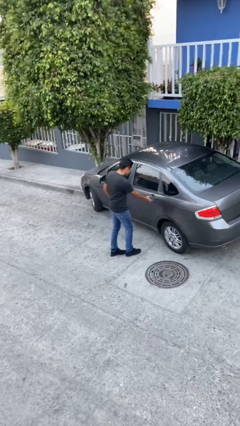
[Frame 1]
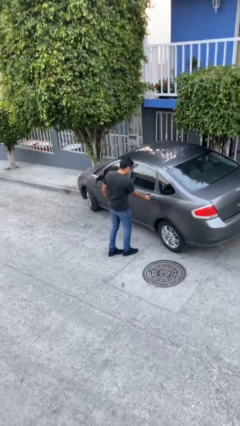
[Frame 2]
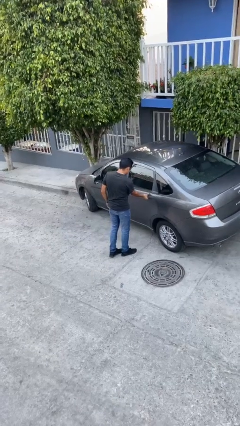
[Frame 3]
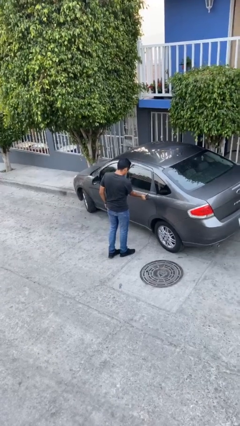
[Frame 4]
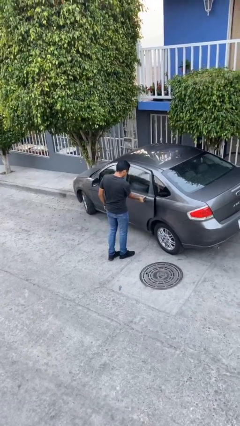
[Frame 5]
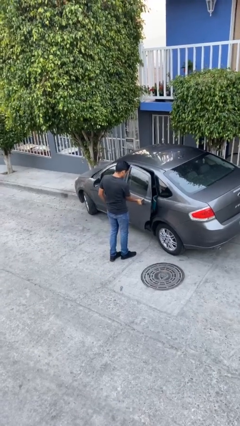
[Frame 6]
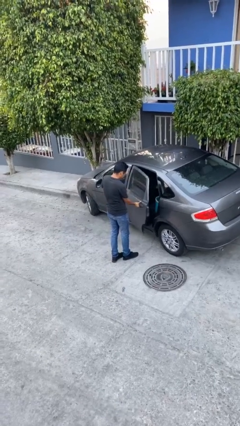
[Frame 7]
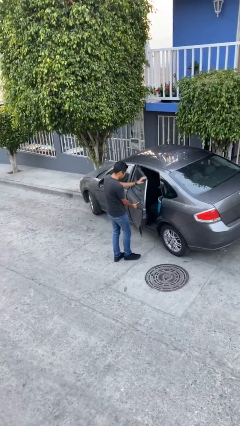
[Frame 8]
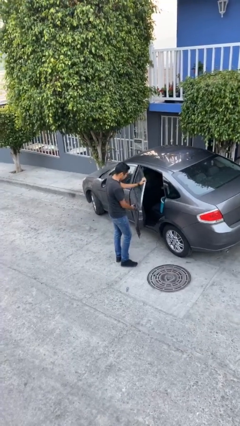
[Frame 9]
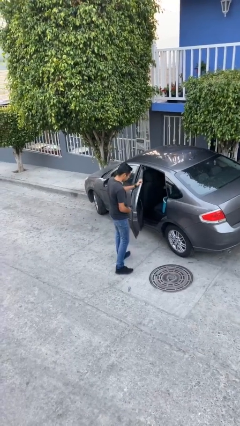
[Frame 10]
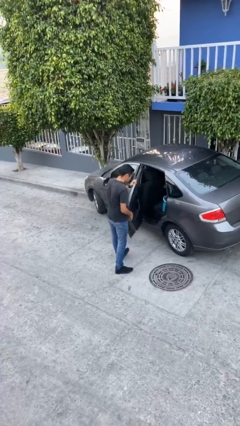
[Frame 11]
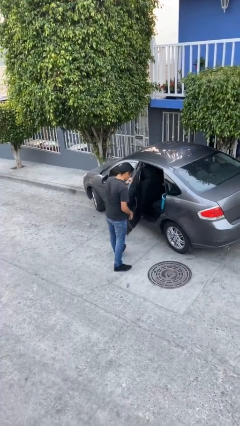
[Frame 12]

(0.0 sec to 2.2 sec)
person opens car door

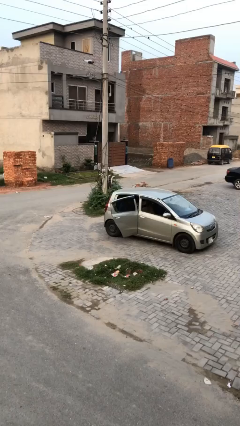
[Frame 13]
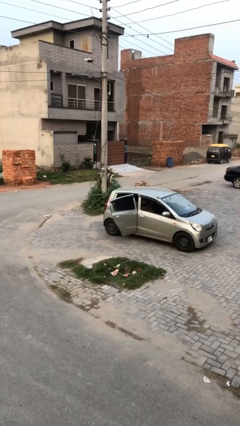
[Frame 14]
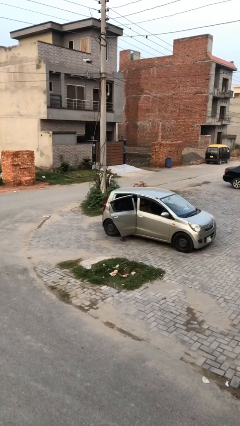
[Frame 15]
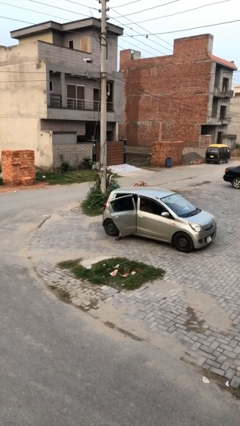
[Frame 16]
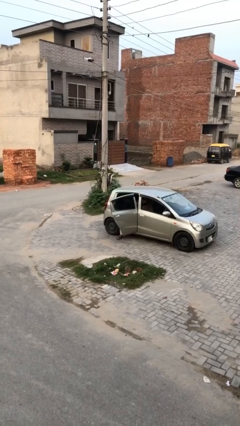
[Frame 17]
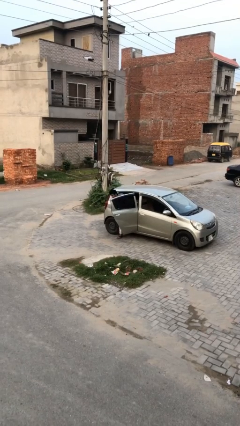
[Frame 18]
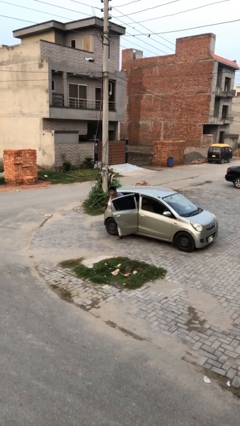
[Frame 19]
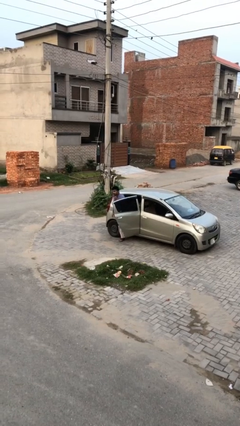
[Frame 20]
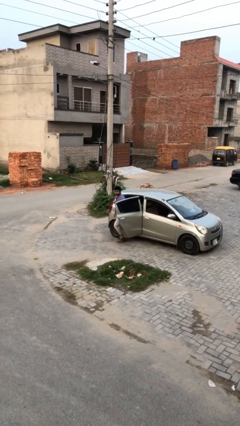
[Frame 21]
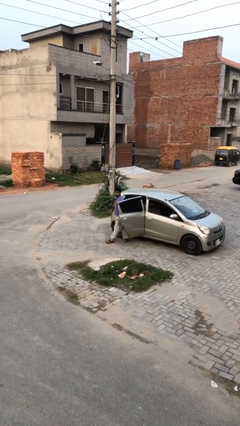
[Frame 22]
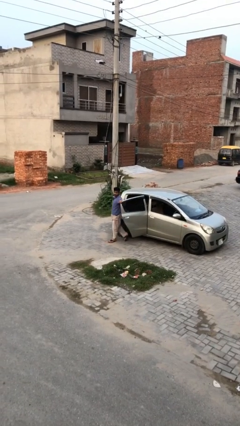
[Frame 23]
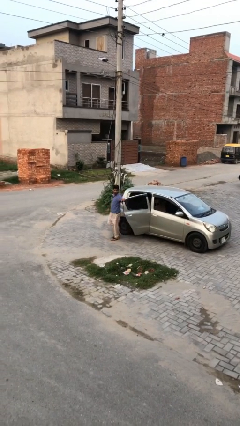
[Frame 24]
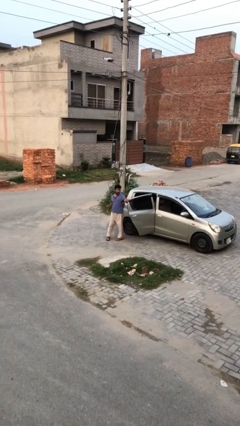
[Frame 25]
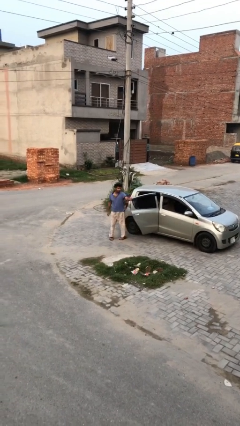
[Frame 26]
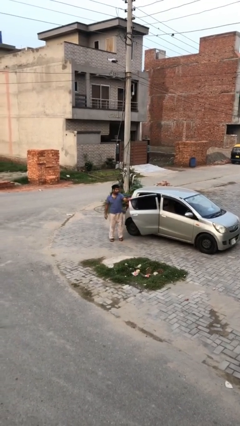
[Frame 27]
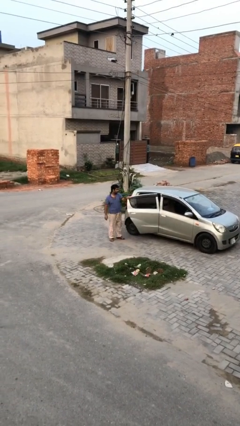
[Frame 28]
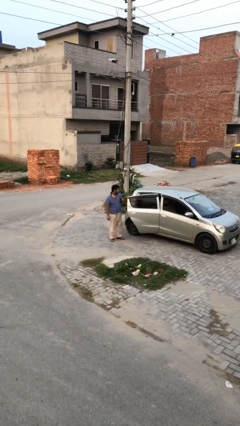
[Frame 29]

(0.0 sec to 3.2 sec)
person exits car

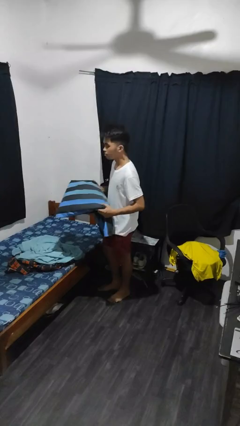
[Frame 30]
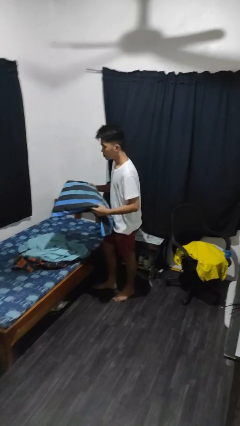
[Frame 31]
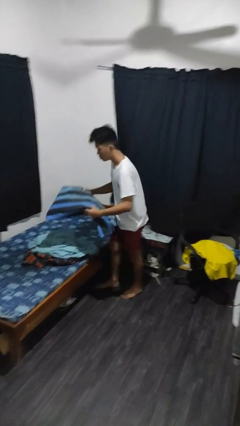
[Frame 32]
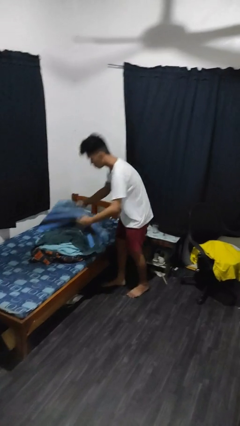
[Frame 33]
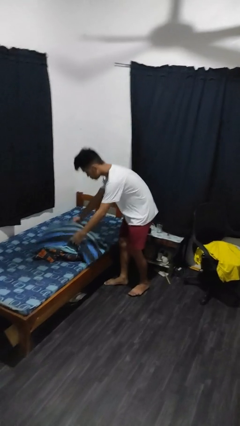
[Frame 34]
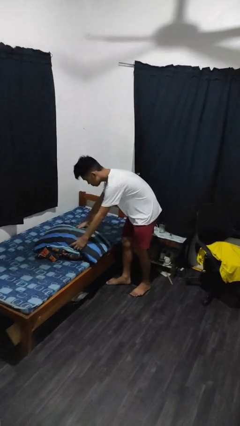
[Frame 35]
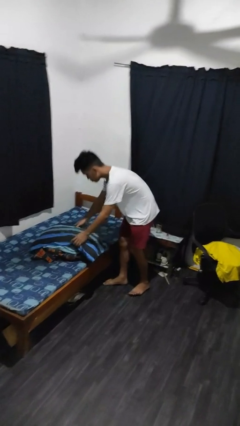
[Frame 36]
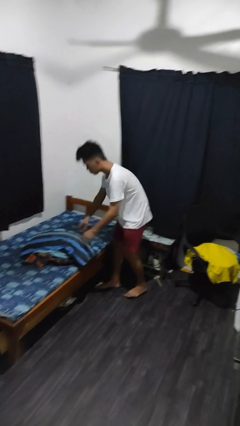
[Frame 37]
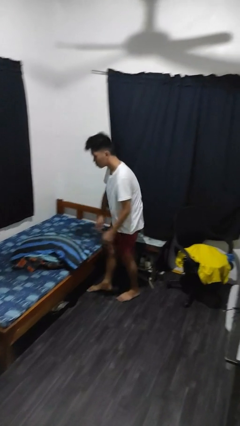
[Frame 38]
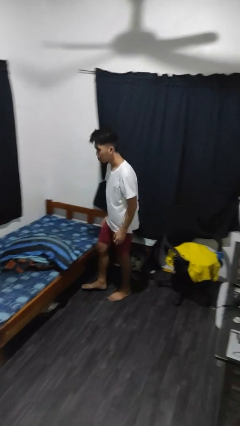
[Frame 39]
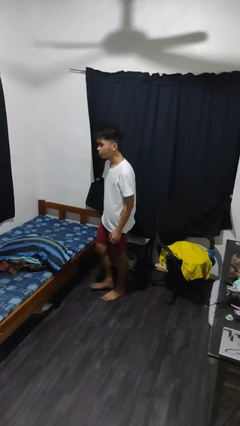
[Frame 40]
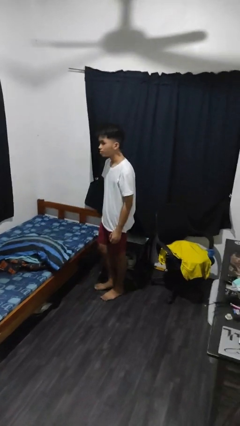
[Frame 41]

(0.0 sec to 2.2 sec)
person puts down object on bed

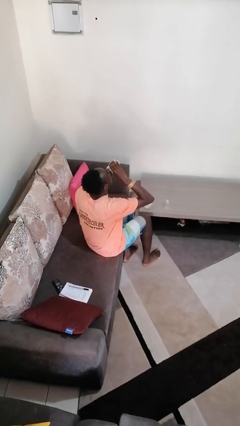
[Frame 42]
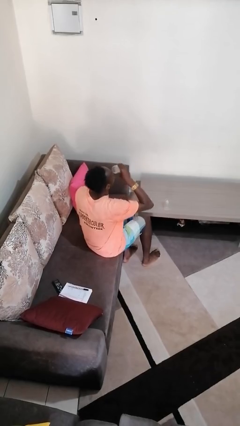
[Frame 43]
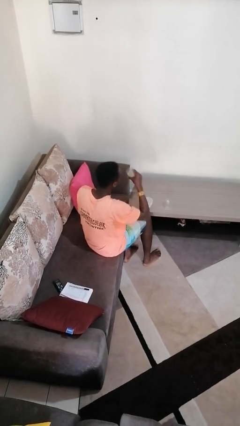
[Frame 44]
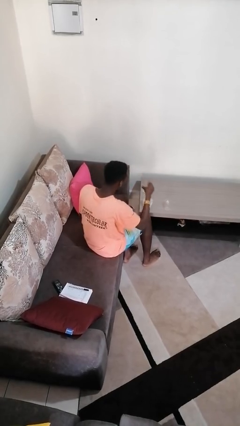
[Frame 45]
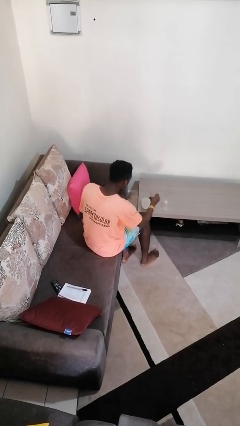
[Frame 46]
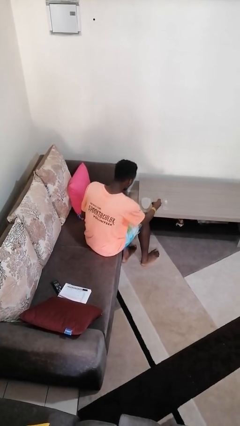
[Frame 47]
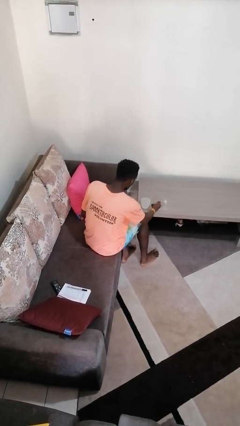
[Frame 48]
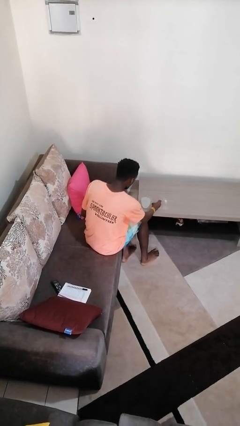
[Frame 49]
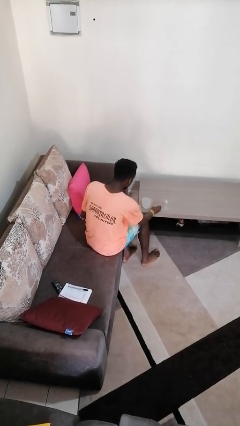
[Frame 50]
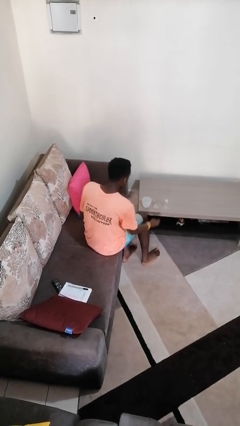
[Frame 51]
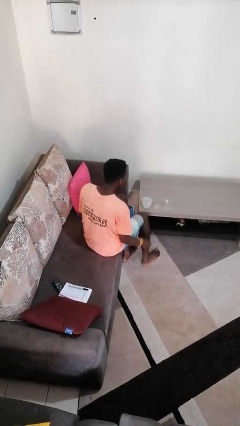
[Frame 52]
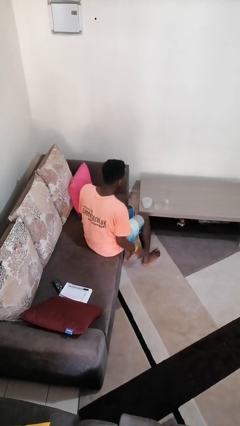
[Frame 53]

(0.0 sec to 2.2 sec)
person puts down object on table

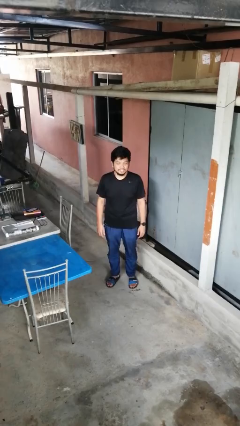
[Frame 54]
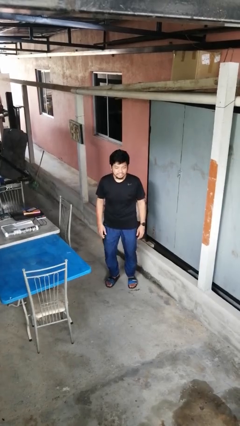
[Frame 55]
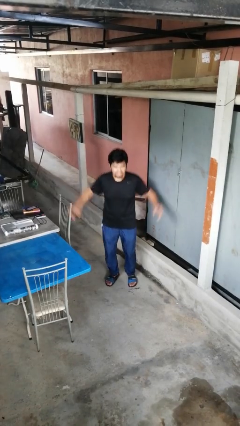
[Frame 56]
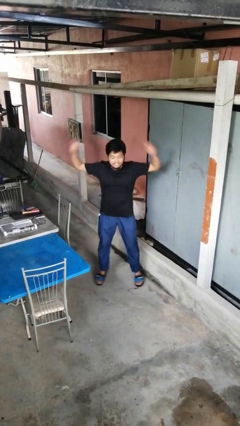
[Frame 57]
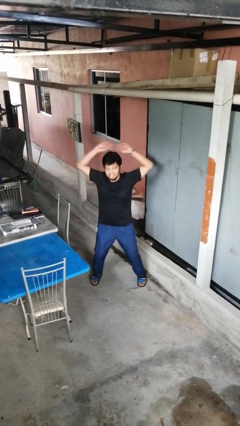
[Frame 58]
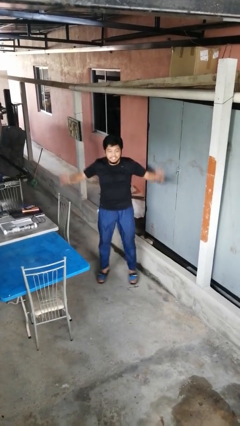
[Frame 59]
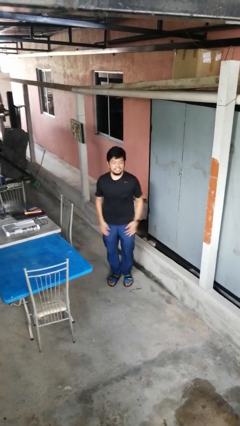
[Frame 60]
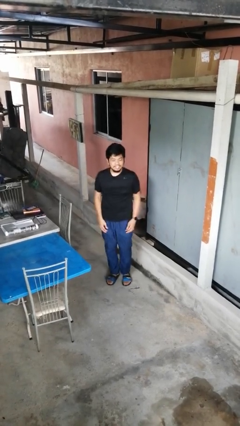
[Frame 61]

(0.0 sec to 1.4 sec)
person exercises with jumping jacks

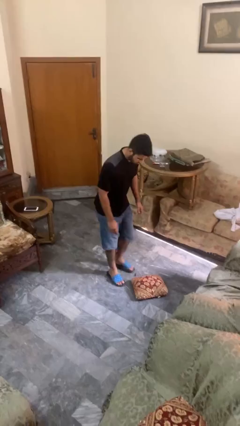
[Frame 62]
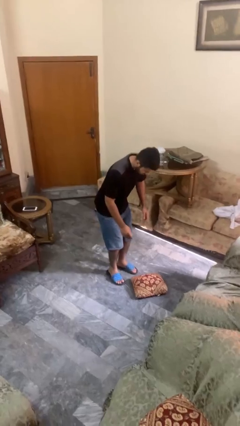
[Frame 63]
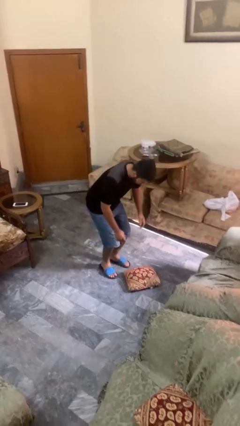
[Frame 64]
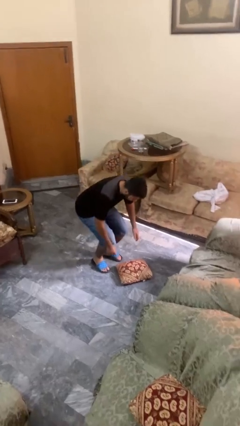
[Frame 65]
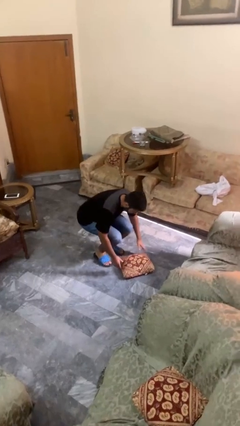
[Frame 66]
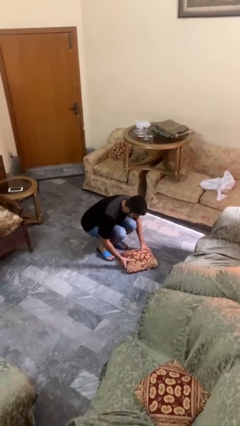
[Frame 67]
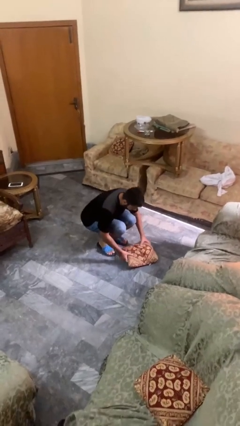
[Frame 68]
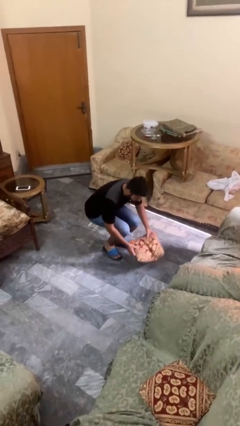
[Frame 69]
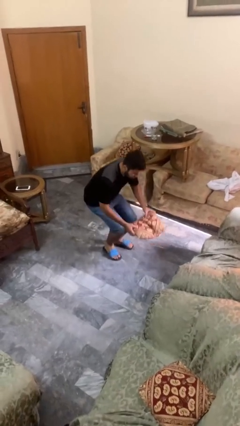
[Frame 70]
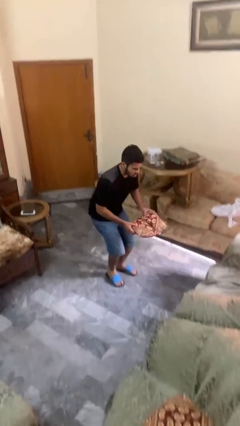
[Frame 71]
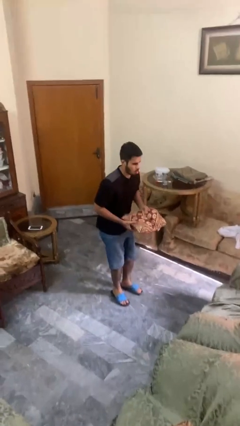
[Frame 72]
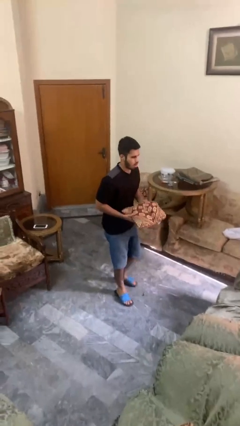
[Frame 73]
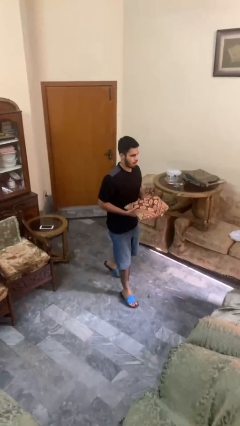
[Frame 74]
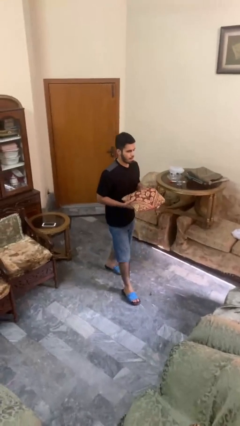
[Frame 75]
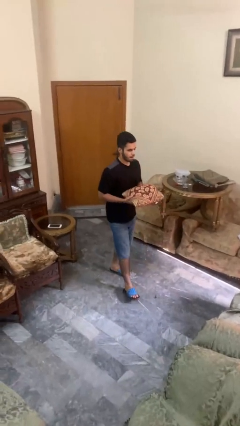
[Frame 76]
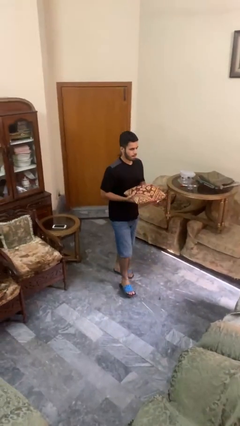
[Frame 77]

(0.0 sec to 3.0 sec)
person picks up object from floor

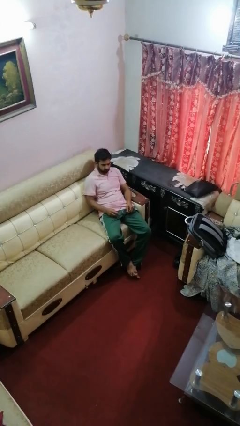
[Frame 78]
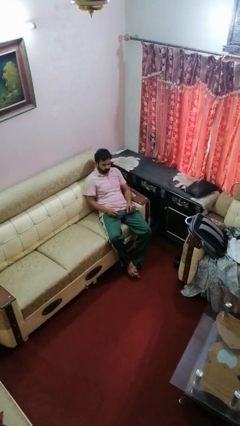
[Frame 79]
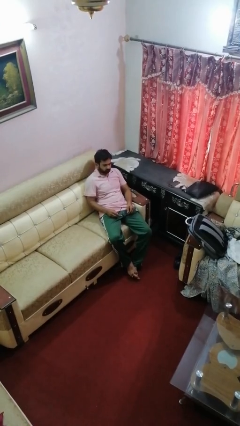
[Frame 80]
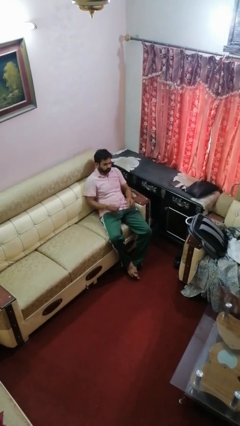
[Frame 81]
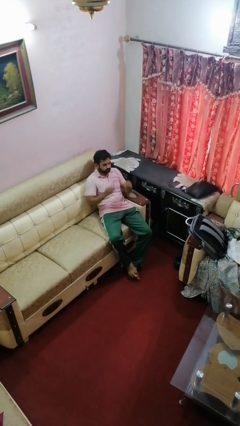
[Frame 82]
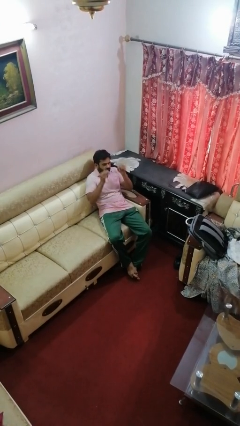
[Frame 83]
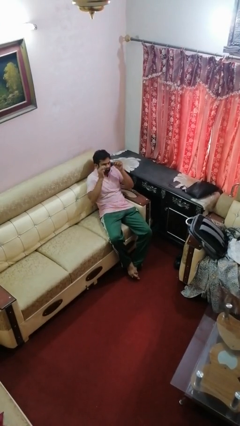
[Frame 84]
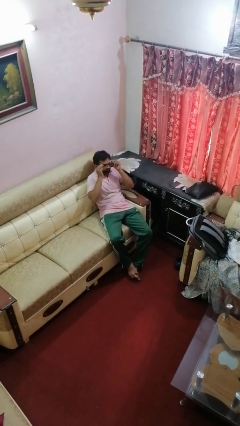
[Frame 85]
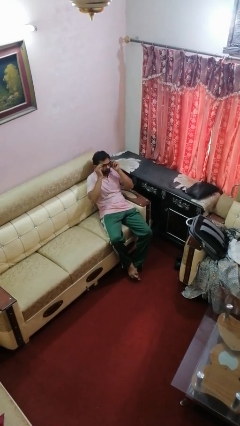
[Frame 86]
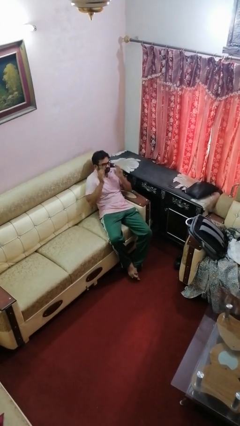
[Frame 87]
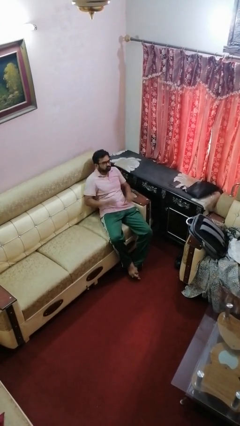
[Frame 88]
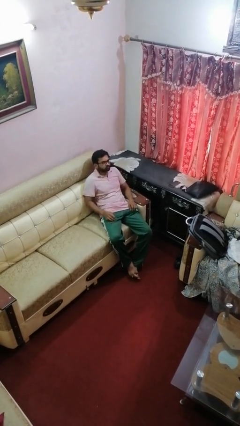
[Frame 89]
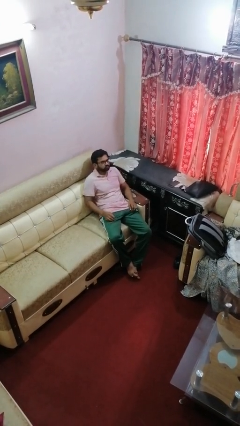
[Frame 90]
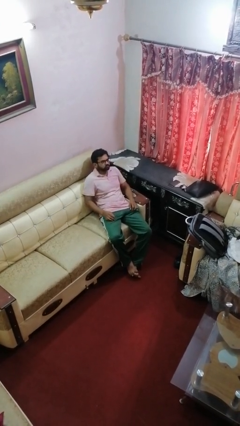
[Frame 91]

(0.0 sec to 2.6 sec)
person puts on glasses
